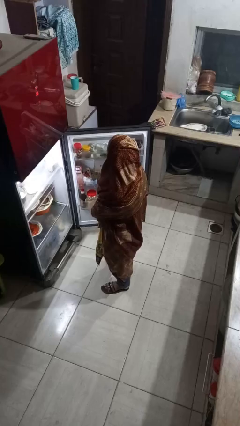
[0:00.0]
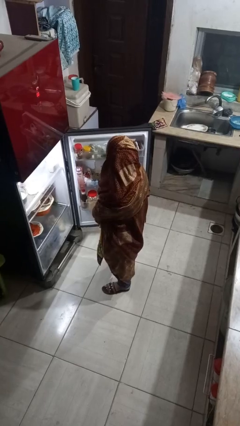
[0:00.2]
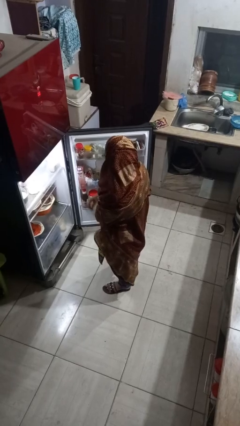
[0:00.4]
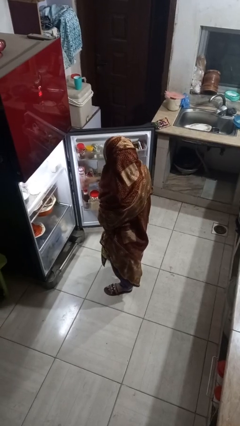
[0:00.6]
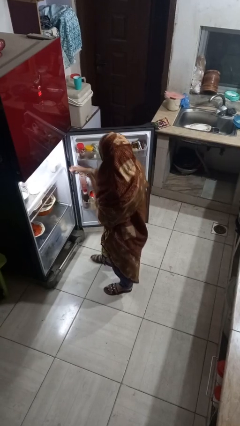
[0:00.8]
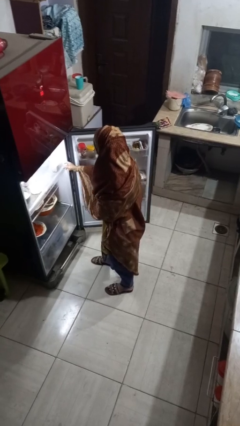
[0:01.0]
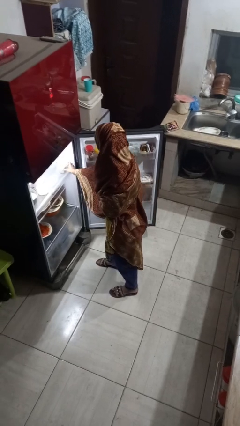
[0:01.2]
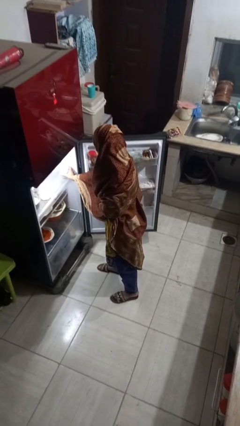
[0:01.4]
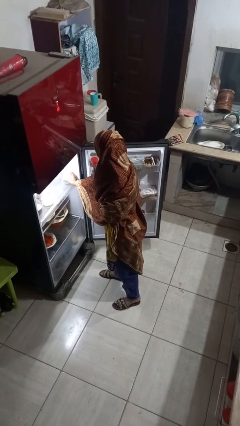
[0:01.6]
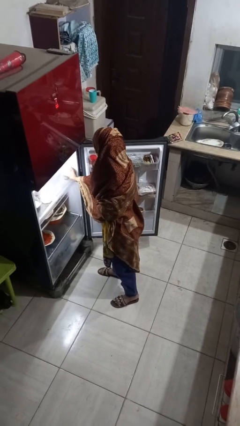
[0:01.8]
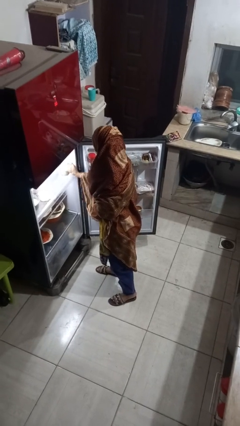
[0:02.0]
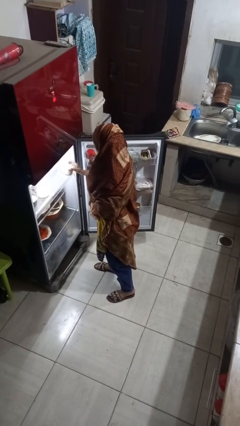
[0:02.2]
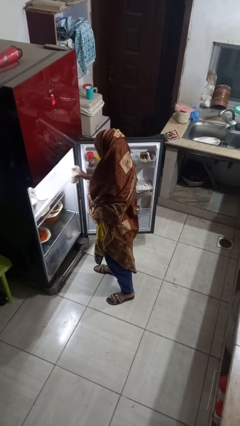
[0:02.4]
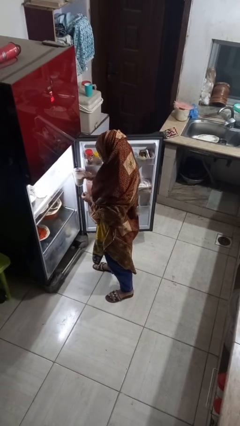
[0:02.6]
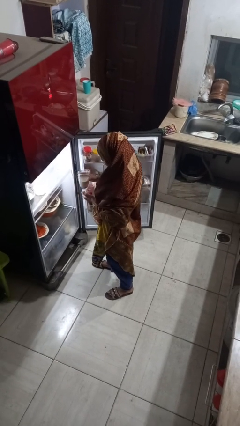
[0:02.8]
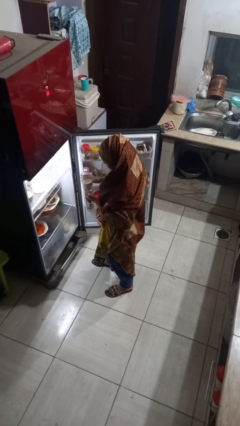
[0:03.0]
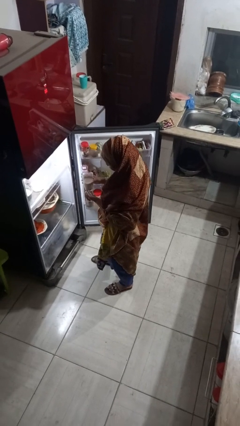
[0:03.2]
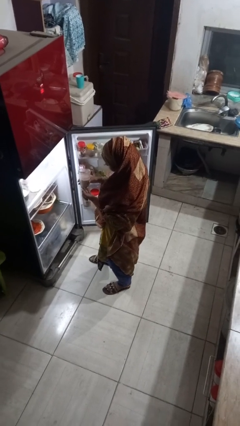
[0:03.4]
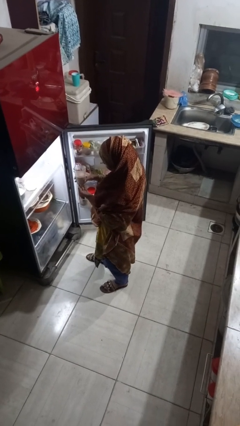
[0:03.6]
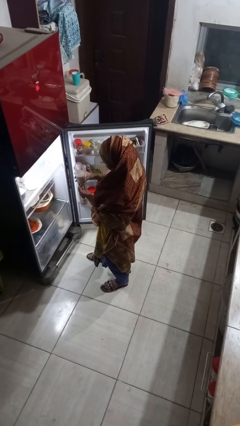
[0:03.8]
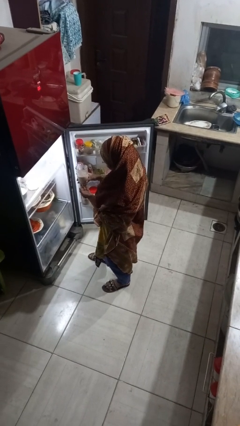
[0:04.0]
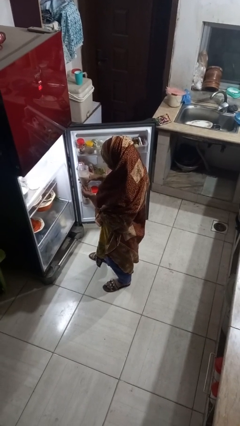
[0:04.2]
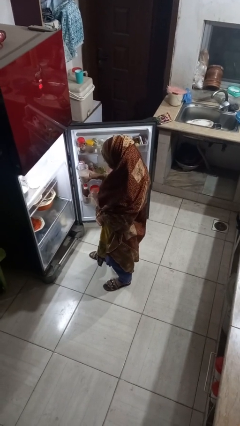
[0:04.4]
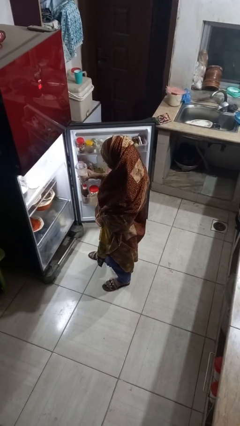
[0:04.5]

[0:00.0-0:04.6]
person takes object from refrigerator

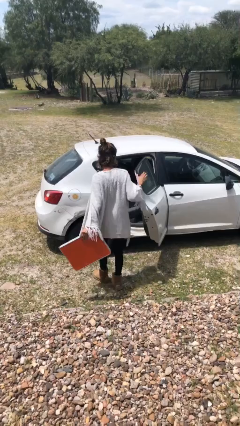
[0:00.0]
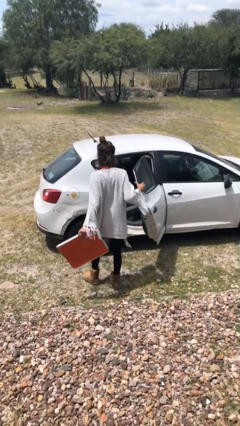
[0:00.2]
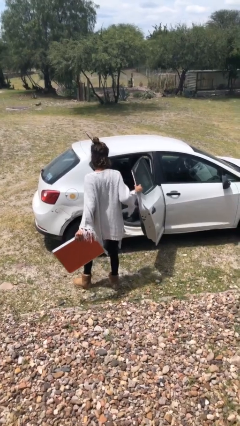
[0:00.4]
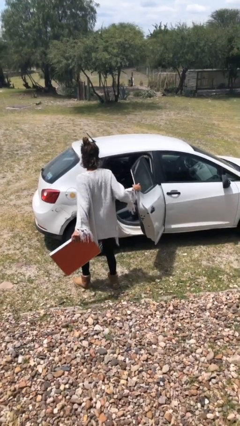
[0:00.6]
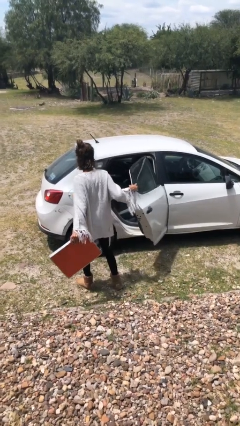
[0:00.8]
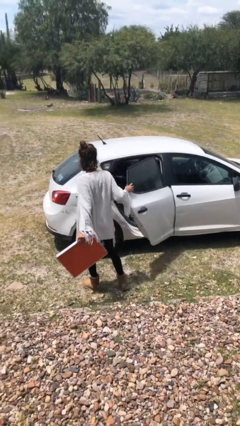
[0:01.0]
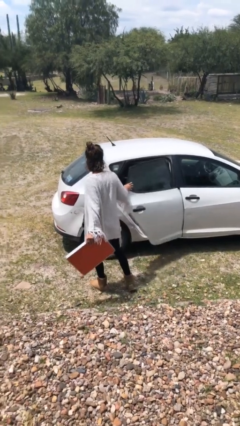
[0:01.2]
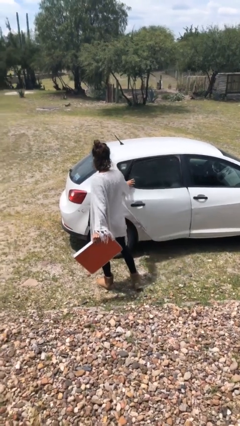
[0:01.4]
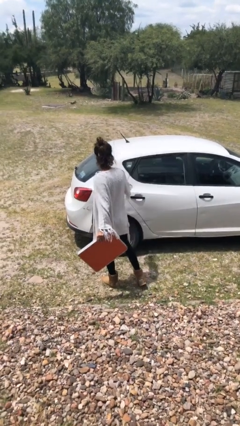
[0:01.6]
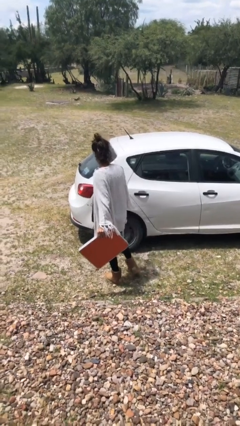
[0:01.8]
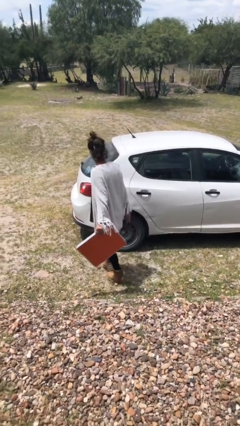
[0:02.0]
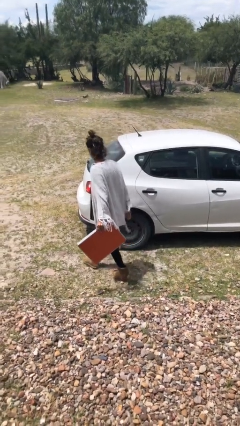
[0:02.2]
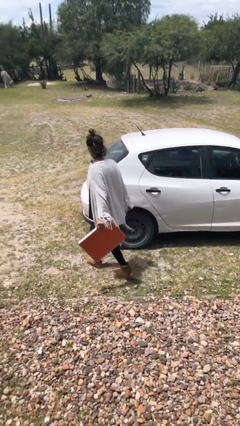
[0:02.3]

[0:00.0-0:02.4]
person closes car door

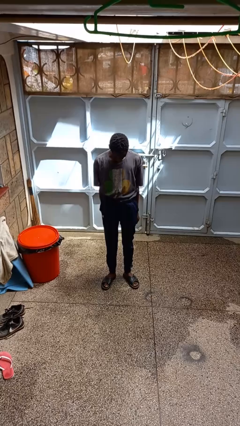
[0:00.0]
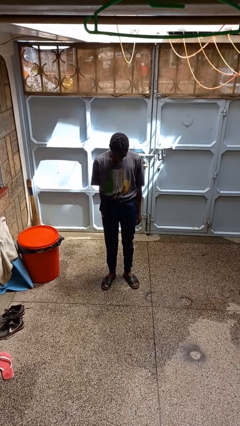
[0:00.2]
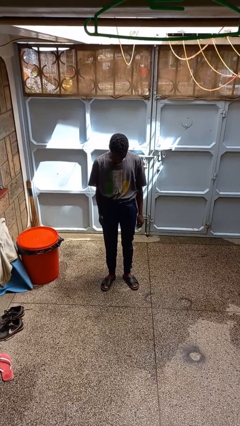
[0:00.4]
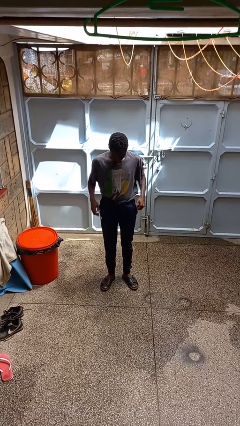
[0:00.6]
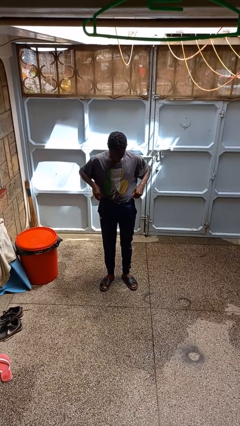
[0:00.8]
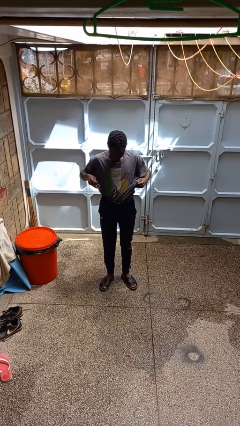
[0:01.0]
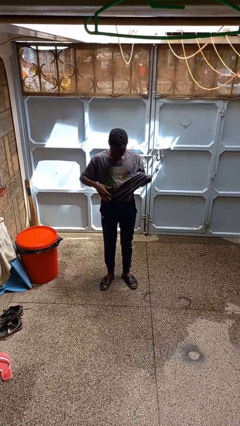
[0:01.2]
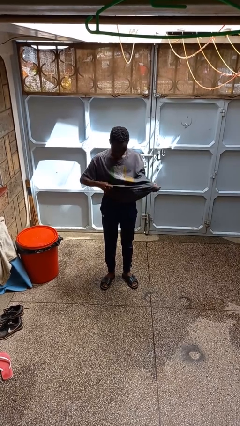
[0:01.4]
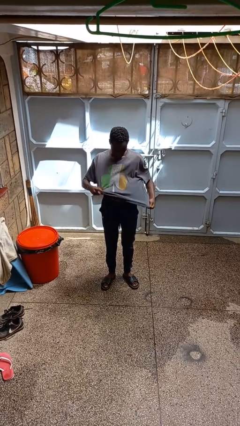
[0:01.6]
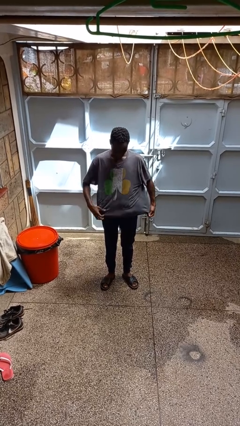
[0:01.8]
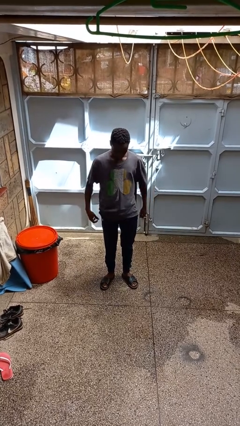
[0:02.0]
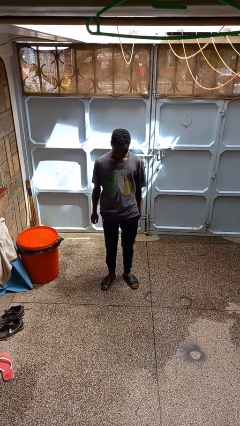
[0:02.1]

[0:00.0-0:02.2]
person untucks shirt

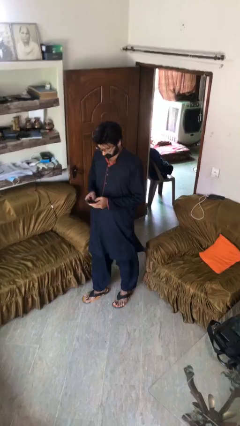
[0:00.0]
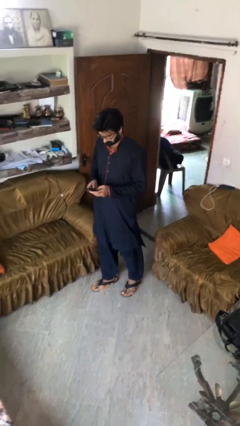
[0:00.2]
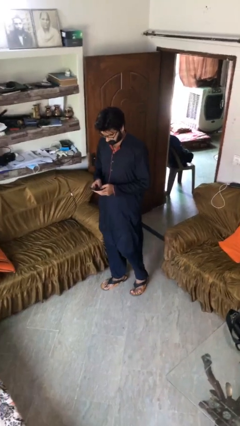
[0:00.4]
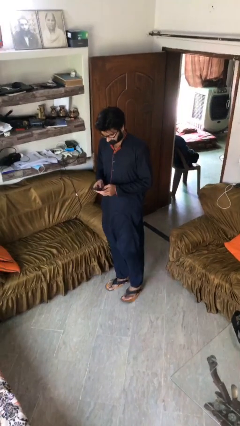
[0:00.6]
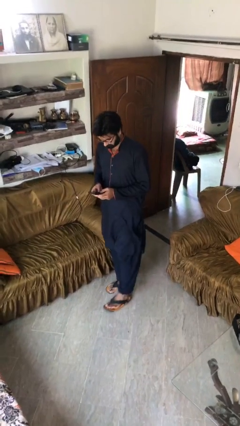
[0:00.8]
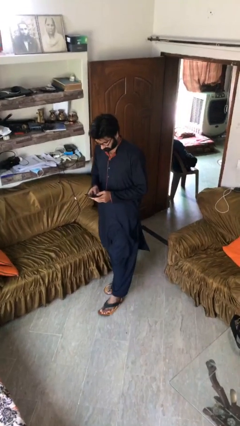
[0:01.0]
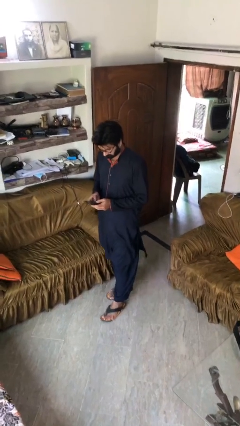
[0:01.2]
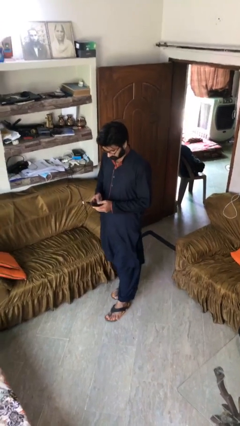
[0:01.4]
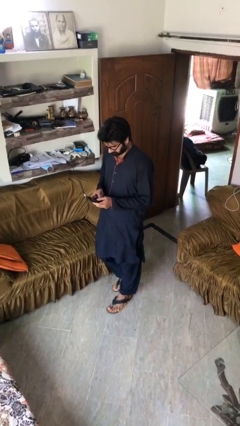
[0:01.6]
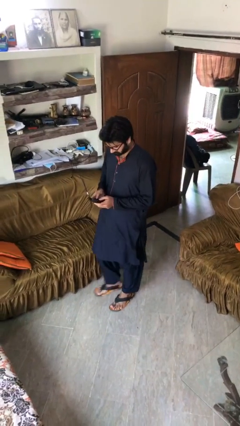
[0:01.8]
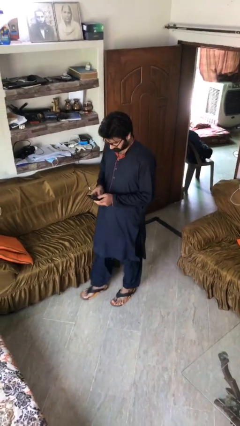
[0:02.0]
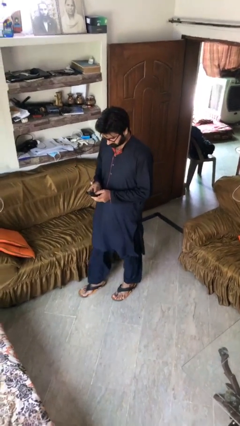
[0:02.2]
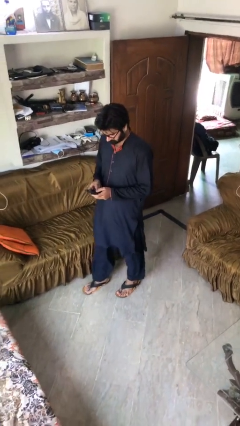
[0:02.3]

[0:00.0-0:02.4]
person texts on phone

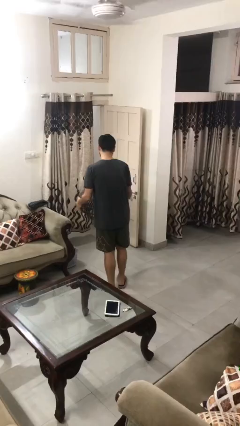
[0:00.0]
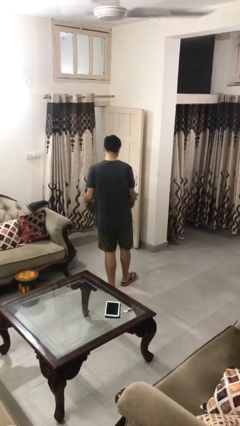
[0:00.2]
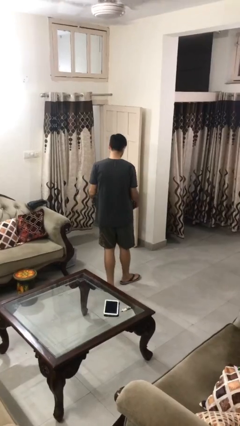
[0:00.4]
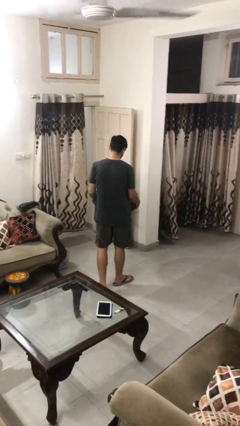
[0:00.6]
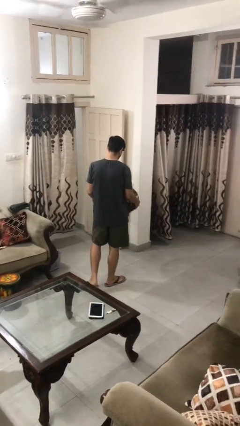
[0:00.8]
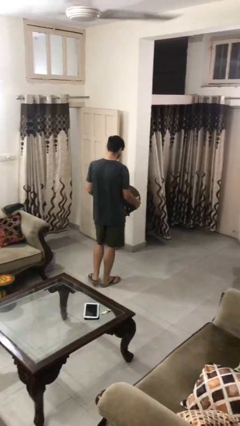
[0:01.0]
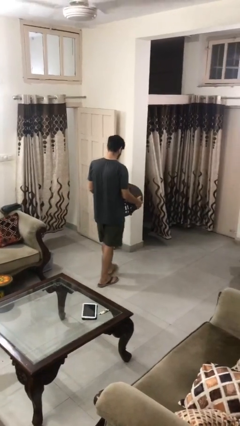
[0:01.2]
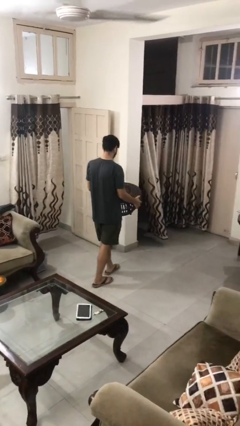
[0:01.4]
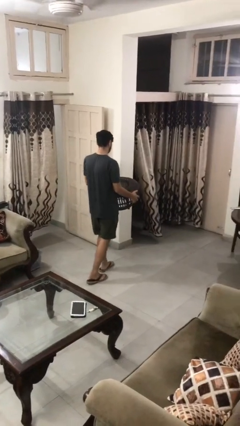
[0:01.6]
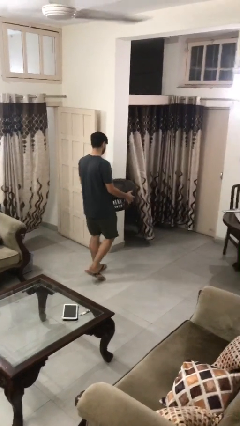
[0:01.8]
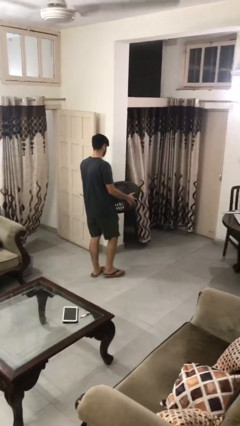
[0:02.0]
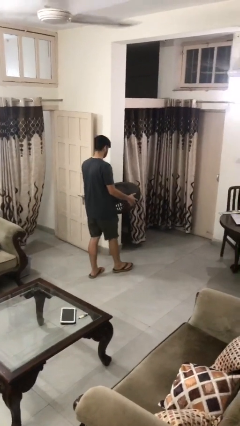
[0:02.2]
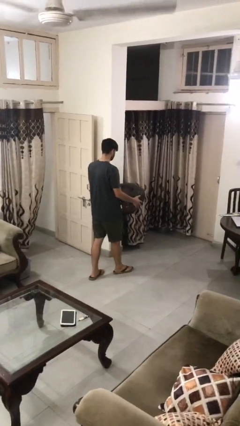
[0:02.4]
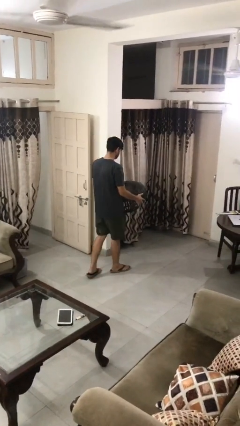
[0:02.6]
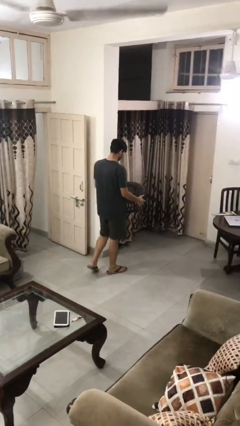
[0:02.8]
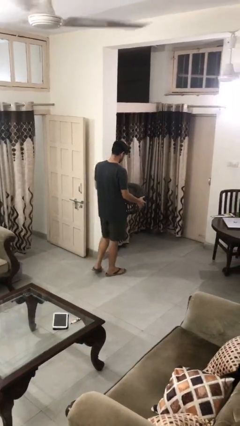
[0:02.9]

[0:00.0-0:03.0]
person carries furniture

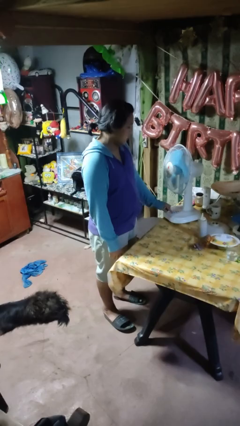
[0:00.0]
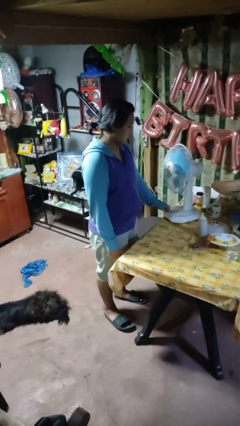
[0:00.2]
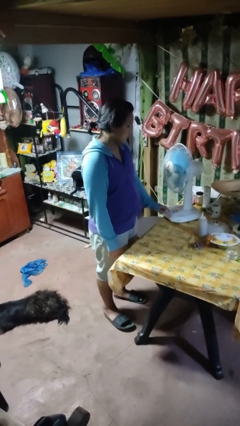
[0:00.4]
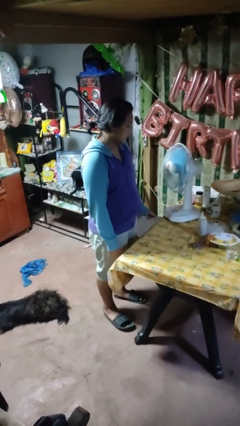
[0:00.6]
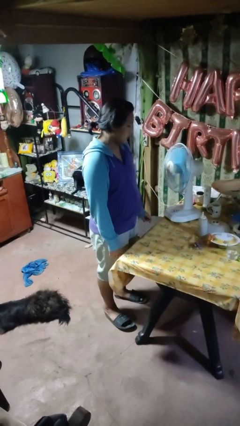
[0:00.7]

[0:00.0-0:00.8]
person turns on fan

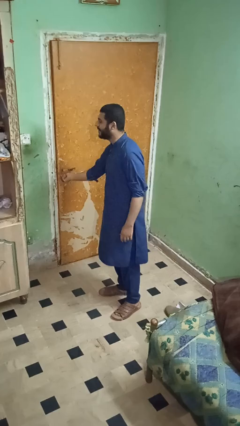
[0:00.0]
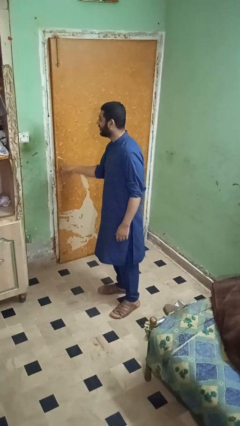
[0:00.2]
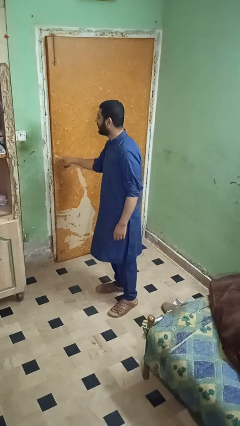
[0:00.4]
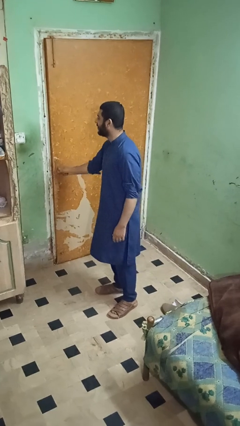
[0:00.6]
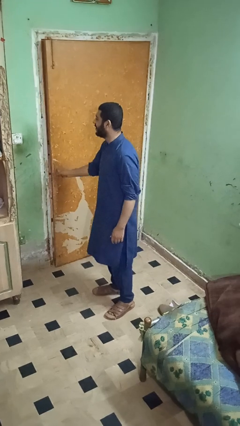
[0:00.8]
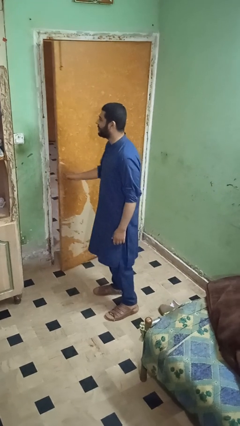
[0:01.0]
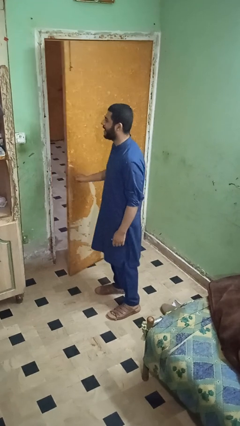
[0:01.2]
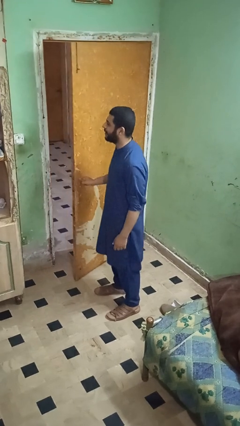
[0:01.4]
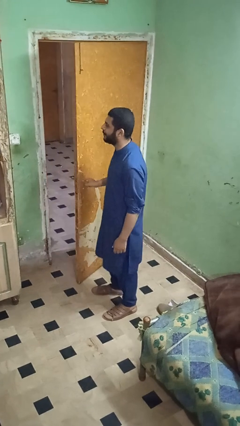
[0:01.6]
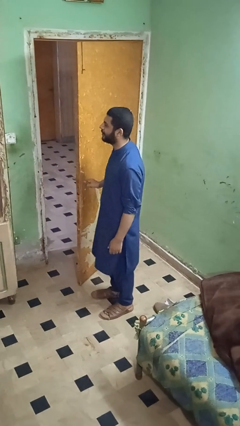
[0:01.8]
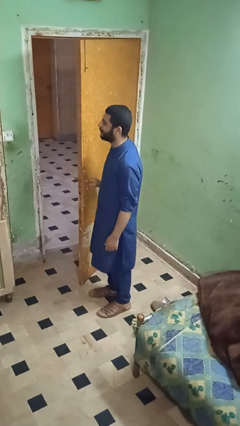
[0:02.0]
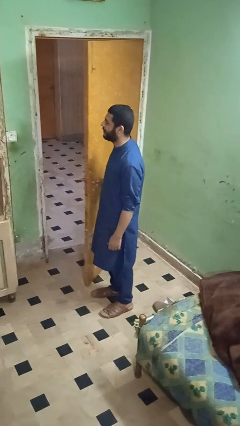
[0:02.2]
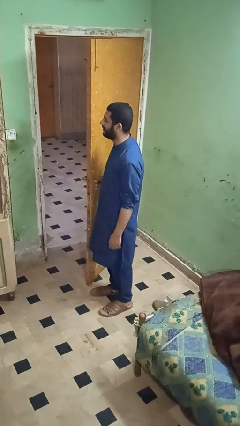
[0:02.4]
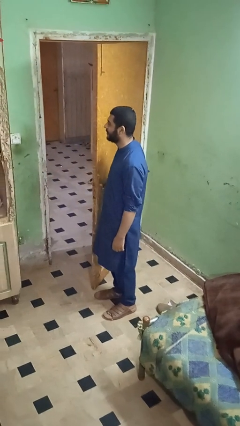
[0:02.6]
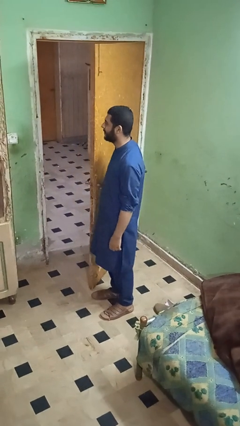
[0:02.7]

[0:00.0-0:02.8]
person opens facility door
